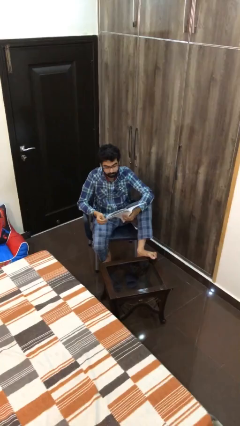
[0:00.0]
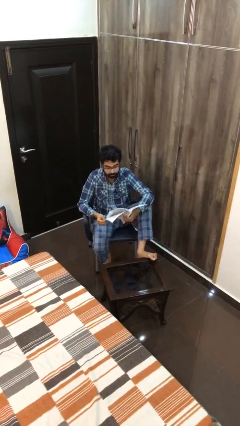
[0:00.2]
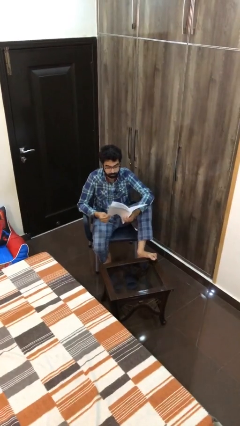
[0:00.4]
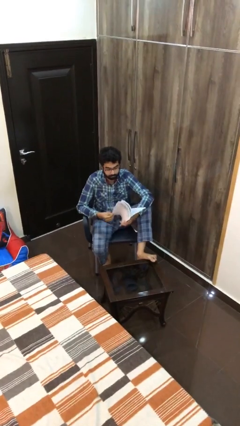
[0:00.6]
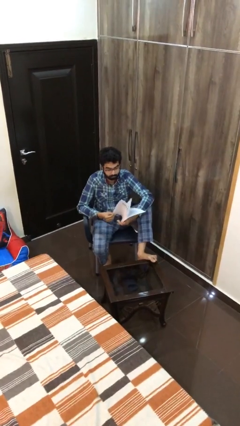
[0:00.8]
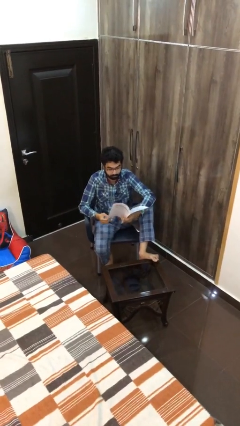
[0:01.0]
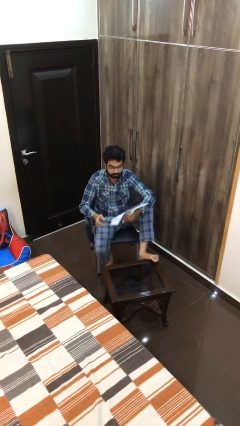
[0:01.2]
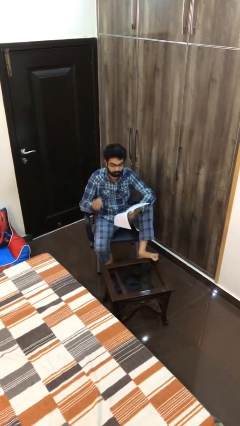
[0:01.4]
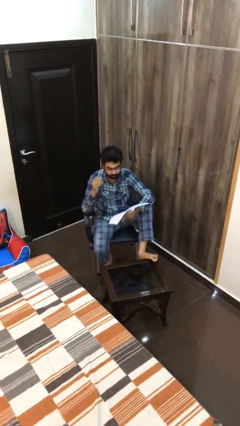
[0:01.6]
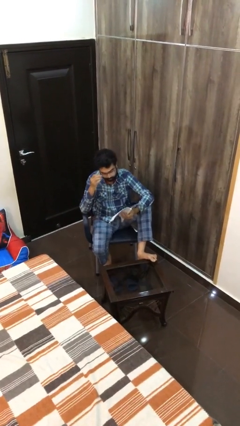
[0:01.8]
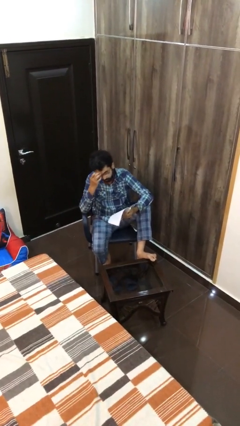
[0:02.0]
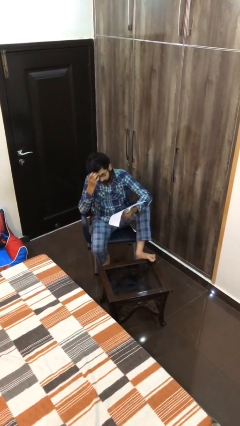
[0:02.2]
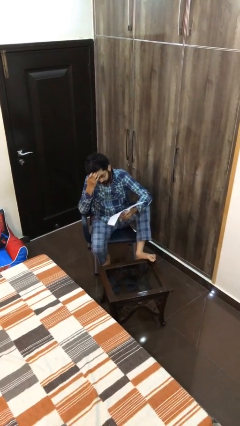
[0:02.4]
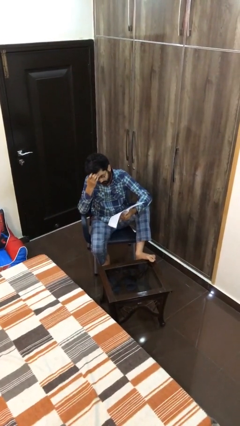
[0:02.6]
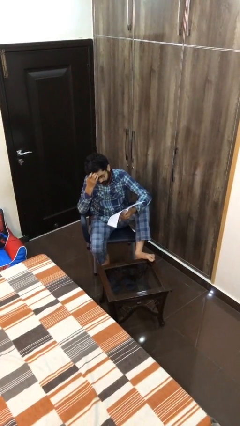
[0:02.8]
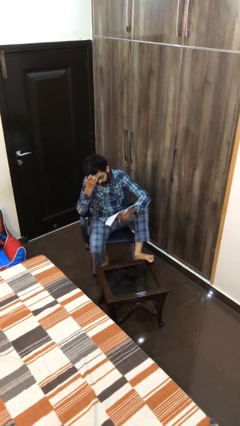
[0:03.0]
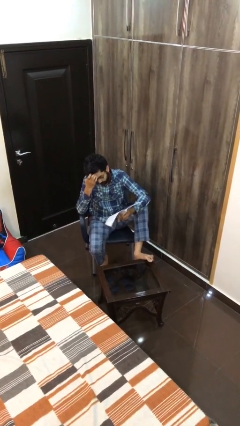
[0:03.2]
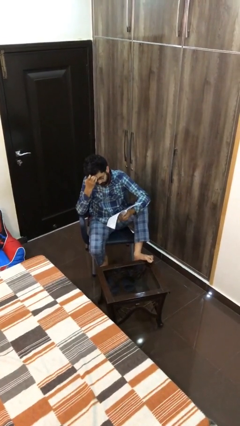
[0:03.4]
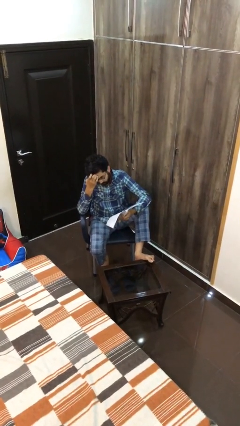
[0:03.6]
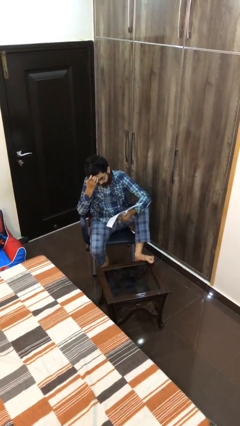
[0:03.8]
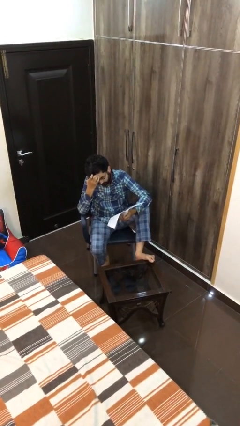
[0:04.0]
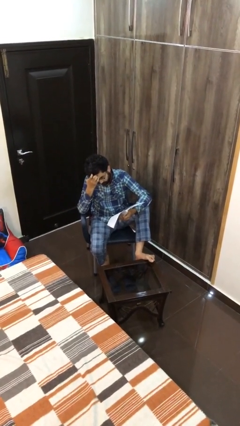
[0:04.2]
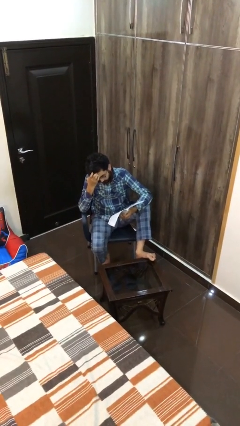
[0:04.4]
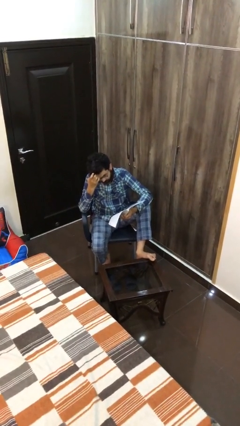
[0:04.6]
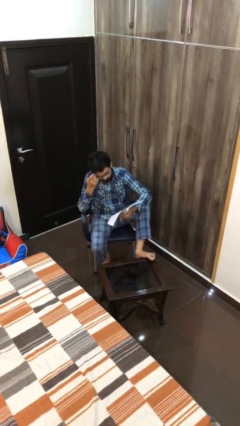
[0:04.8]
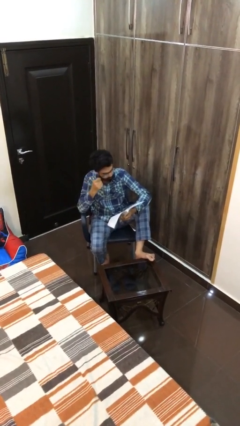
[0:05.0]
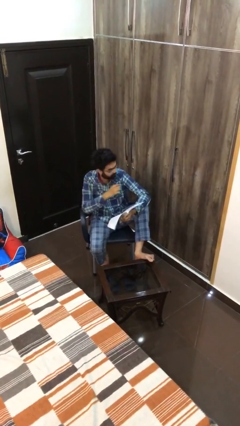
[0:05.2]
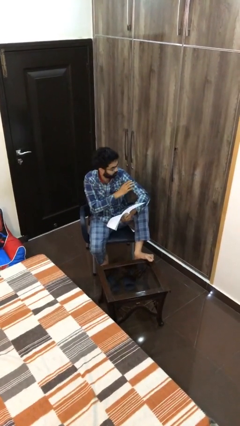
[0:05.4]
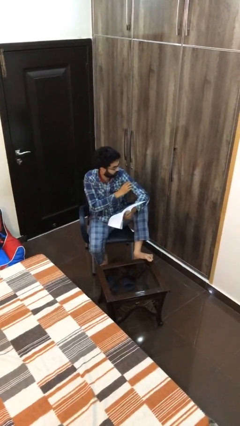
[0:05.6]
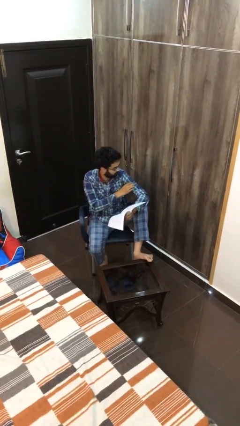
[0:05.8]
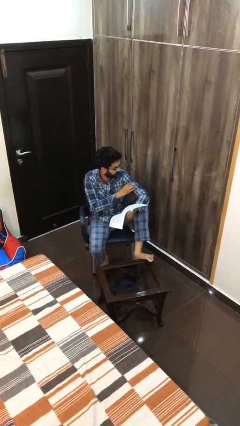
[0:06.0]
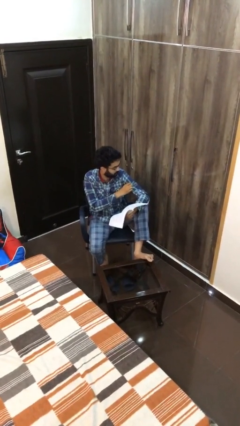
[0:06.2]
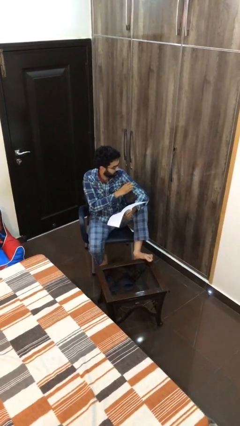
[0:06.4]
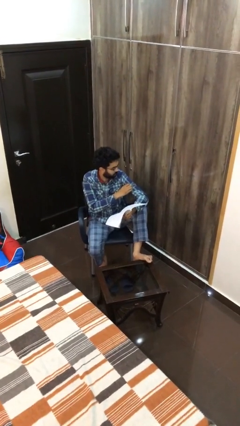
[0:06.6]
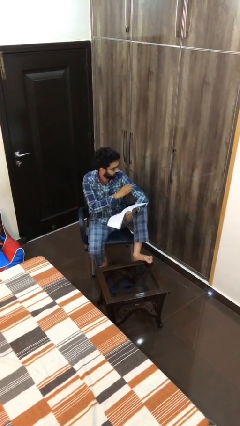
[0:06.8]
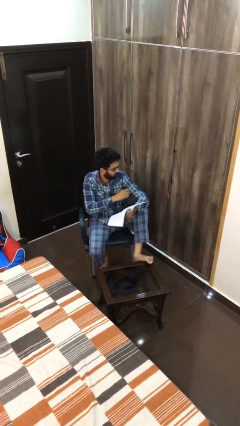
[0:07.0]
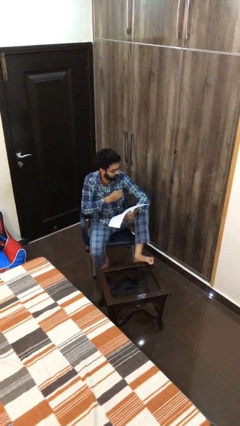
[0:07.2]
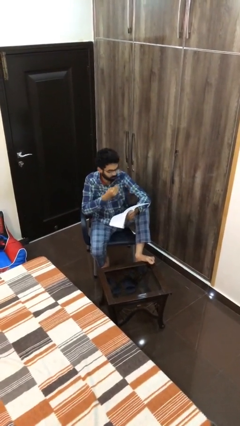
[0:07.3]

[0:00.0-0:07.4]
person reads document

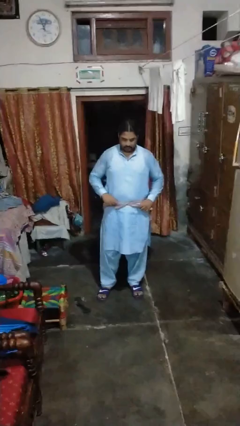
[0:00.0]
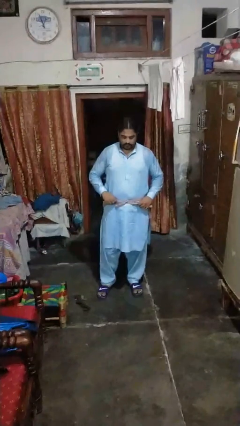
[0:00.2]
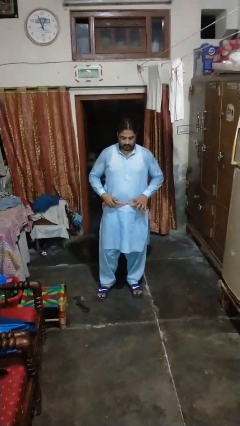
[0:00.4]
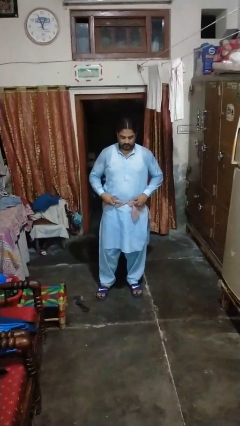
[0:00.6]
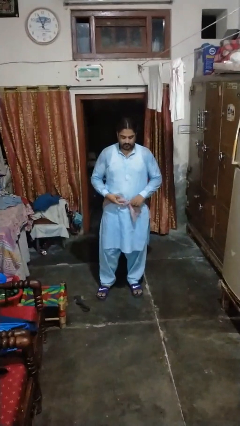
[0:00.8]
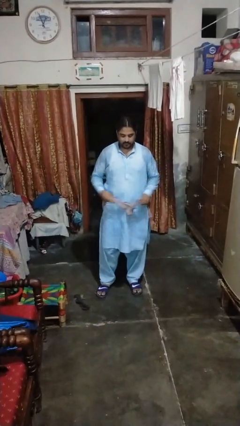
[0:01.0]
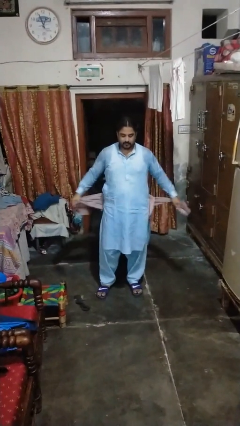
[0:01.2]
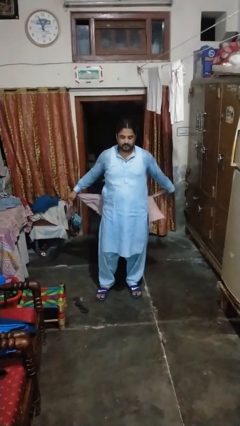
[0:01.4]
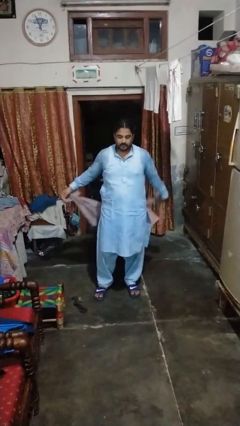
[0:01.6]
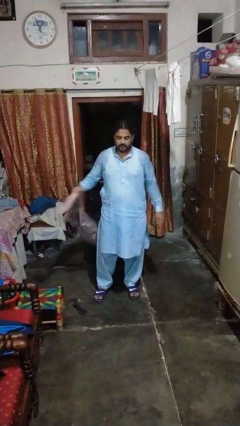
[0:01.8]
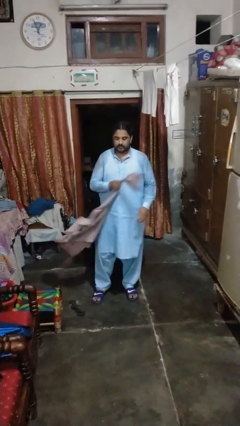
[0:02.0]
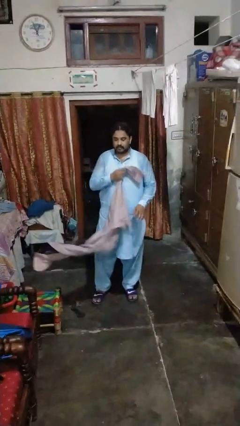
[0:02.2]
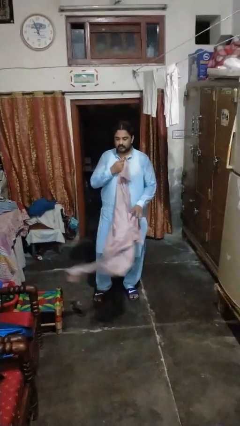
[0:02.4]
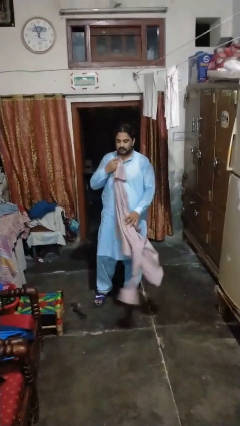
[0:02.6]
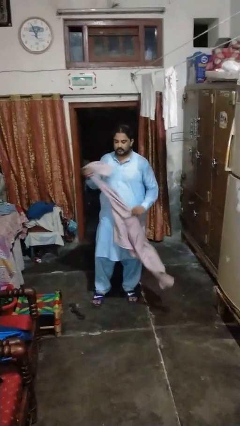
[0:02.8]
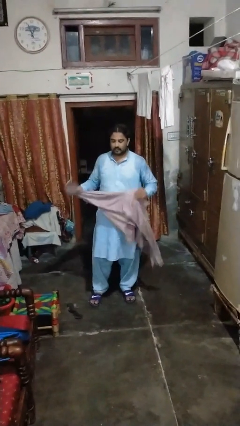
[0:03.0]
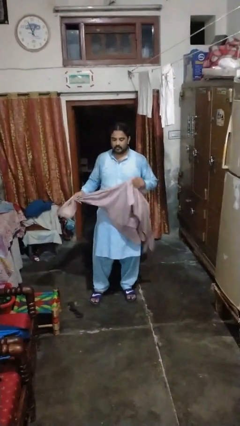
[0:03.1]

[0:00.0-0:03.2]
person unties jacket around waist

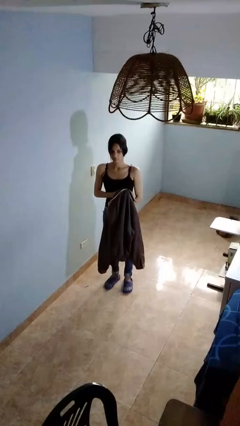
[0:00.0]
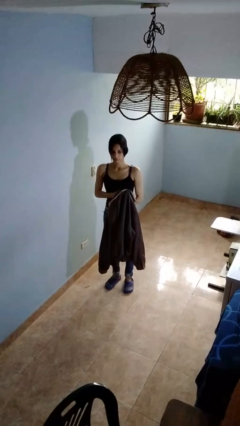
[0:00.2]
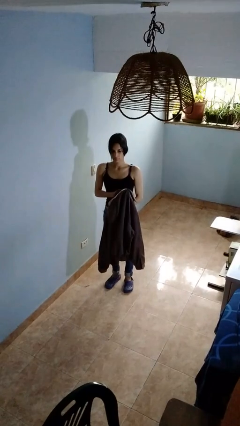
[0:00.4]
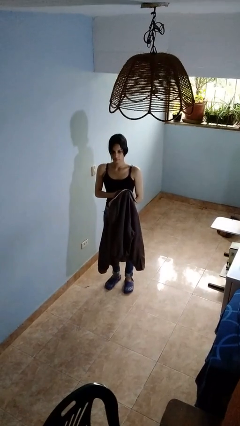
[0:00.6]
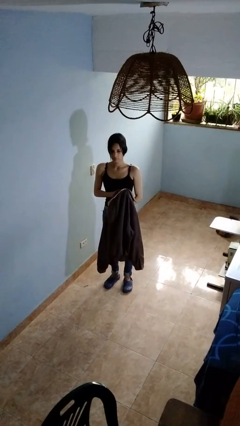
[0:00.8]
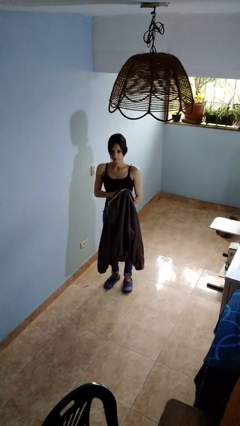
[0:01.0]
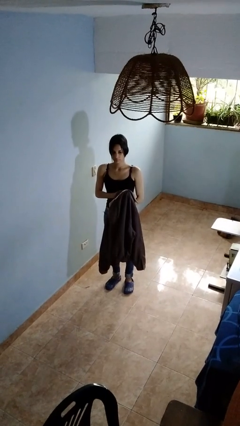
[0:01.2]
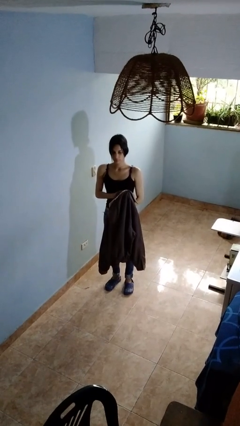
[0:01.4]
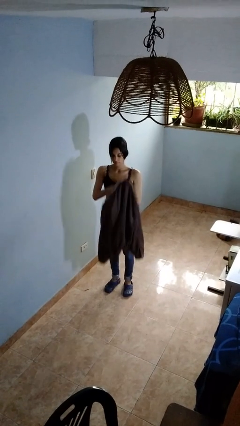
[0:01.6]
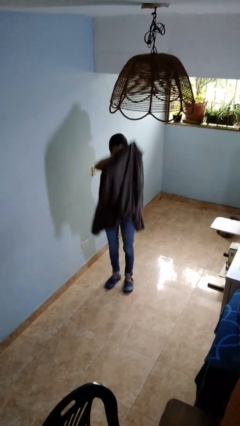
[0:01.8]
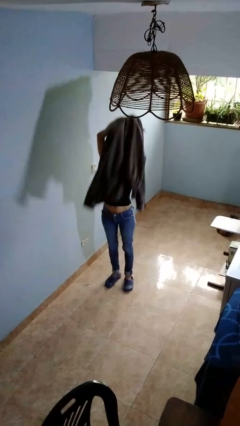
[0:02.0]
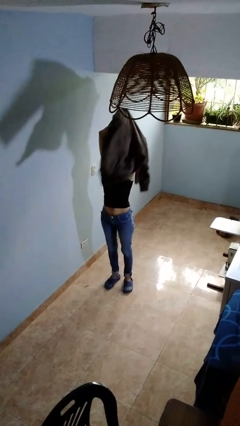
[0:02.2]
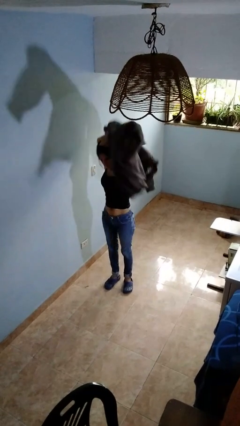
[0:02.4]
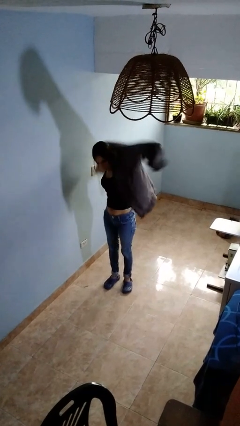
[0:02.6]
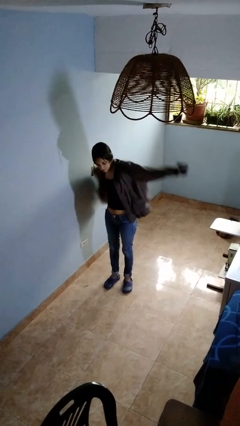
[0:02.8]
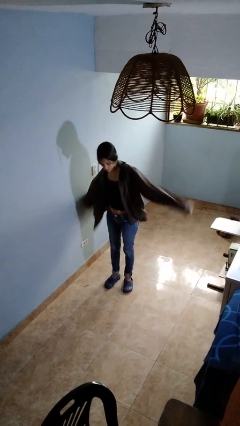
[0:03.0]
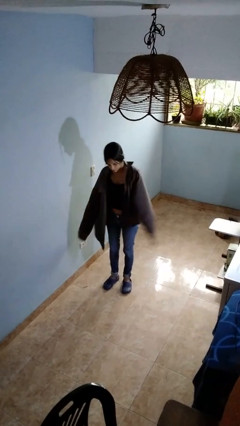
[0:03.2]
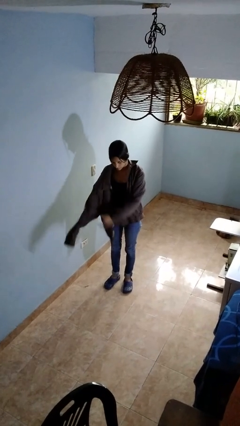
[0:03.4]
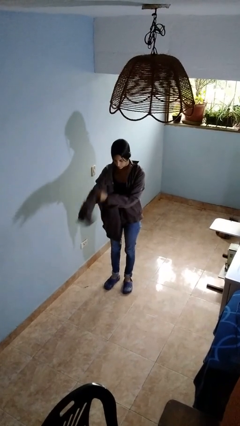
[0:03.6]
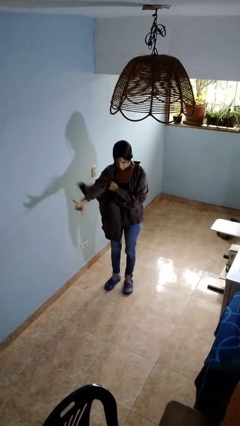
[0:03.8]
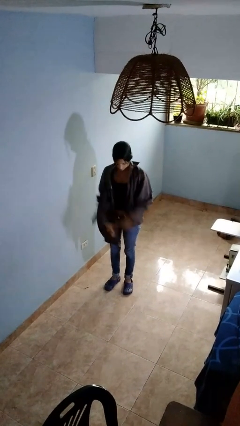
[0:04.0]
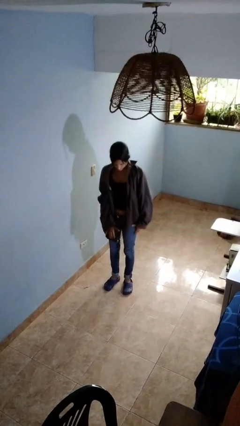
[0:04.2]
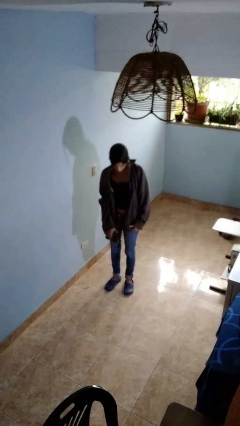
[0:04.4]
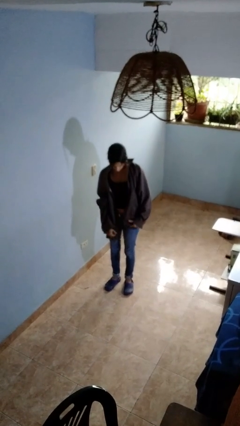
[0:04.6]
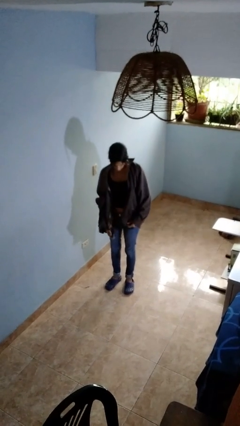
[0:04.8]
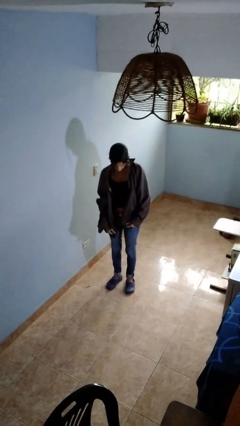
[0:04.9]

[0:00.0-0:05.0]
person puts on jacket

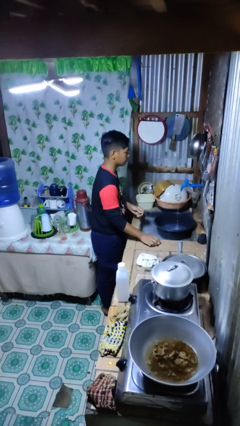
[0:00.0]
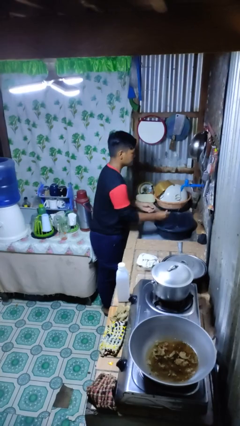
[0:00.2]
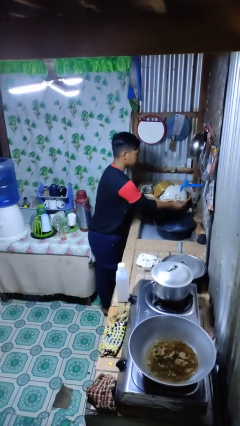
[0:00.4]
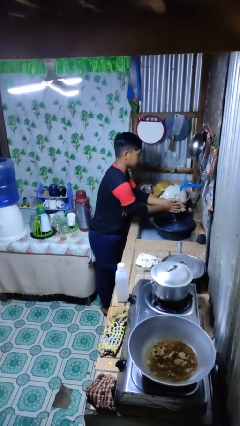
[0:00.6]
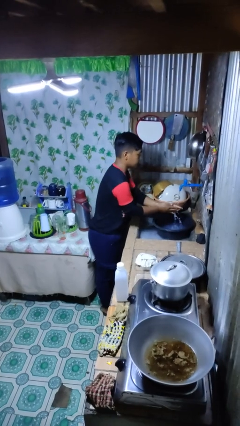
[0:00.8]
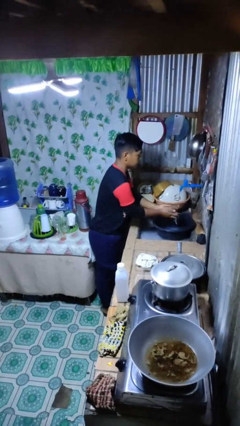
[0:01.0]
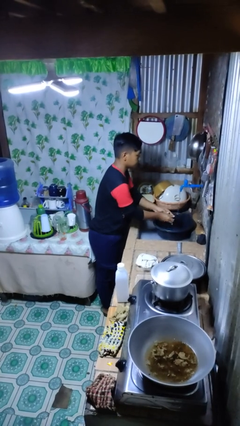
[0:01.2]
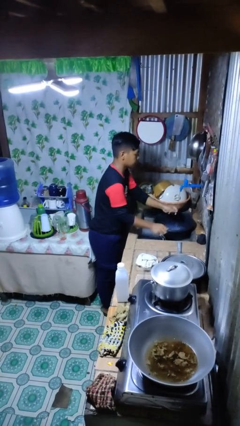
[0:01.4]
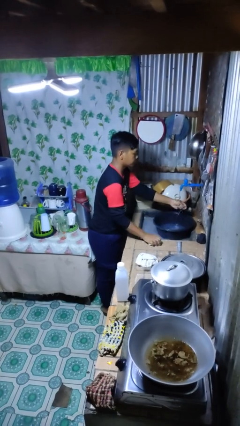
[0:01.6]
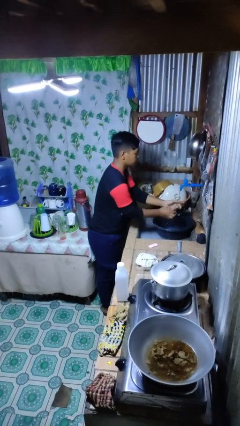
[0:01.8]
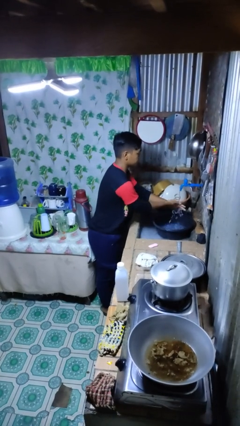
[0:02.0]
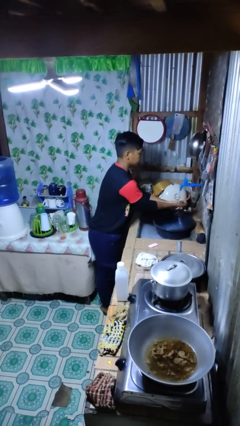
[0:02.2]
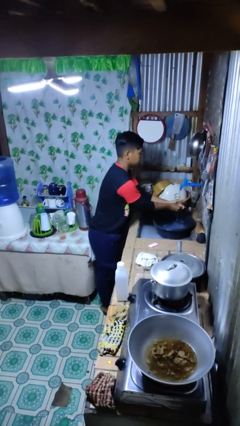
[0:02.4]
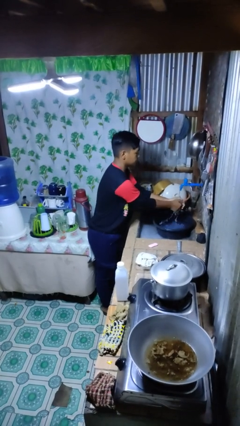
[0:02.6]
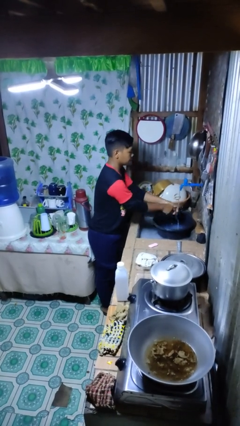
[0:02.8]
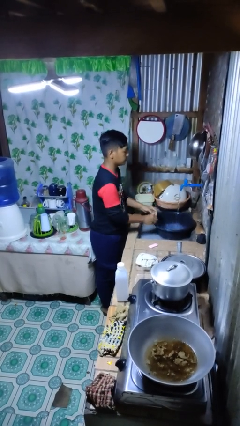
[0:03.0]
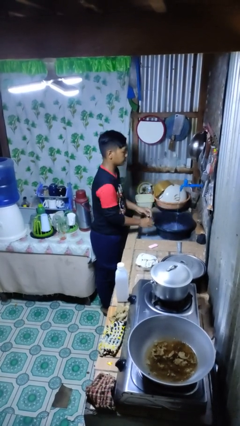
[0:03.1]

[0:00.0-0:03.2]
person washes hands
